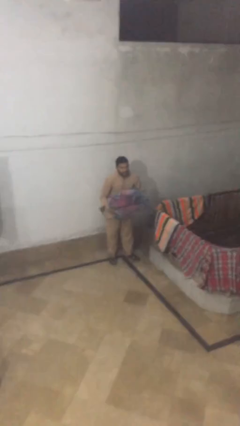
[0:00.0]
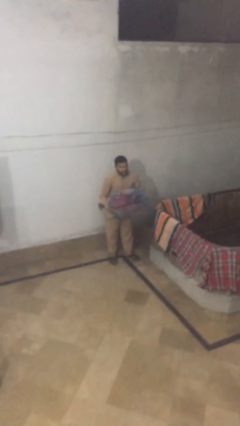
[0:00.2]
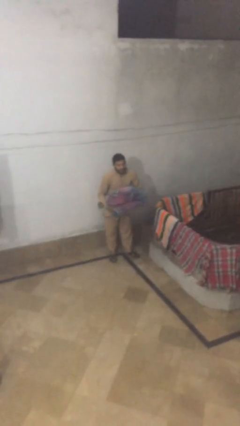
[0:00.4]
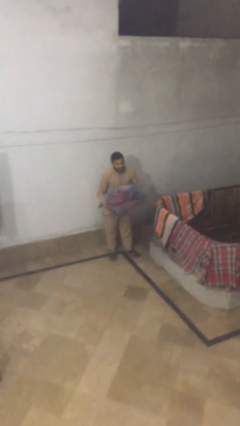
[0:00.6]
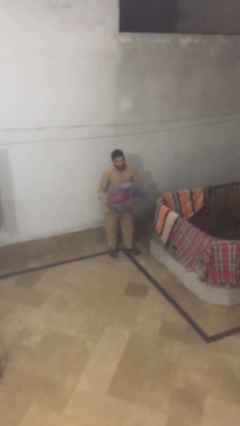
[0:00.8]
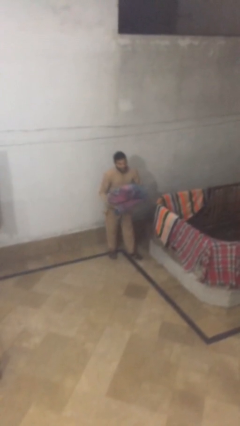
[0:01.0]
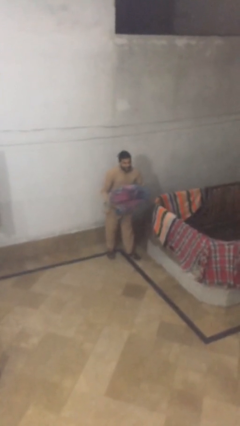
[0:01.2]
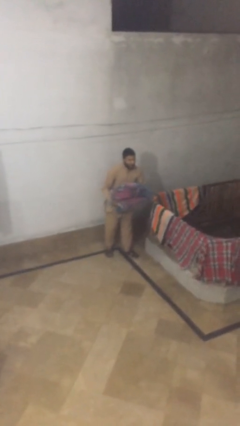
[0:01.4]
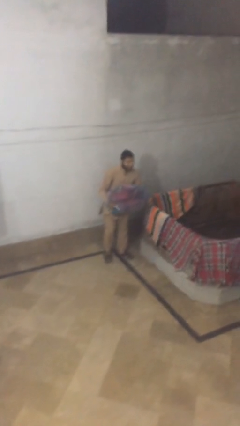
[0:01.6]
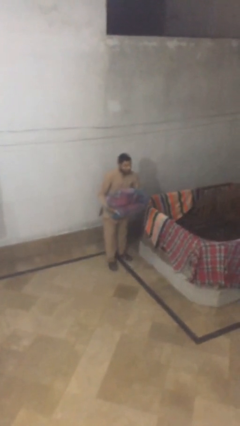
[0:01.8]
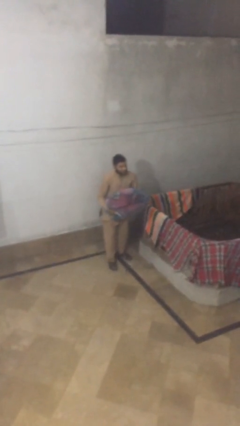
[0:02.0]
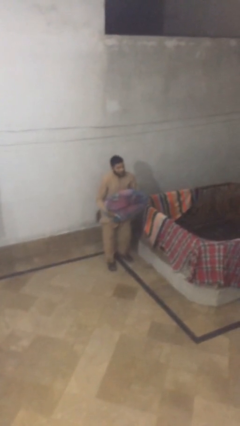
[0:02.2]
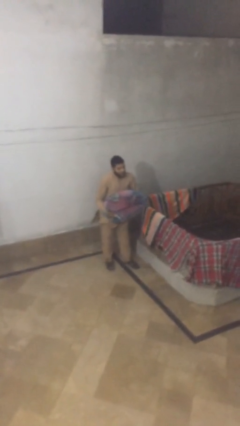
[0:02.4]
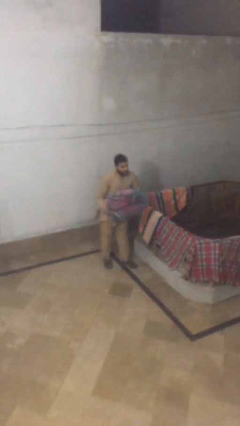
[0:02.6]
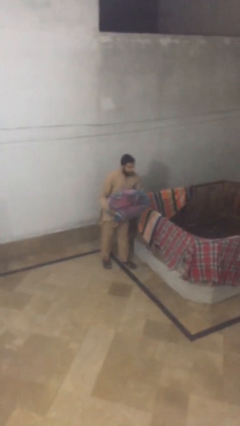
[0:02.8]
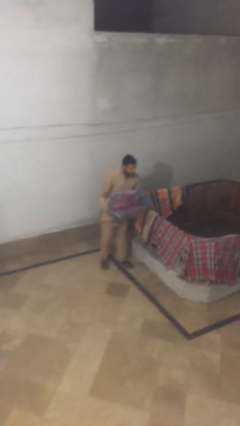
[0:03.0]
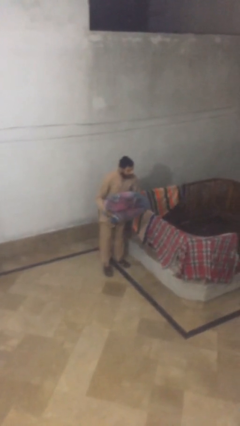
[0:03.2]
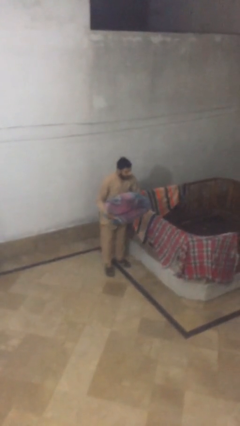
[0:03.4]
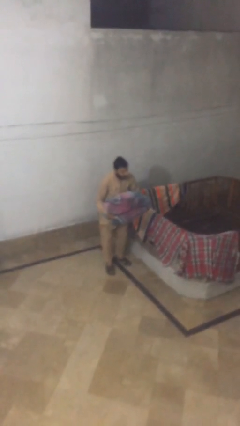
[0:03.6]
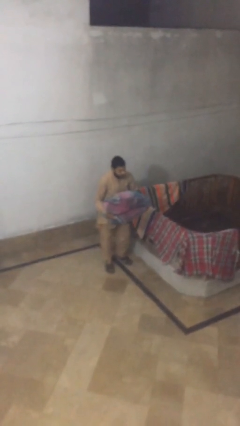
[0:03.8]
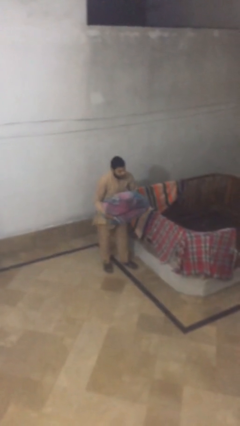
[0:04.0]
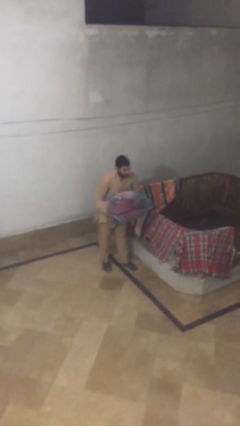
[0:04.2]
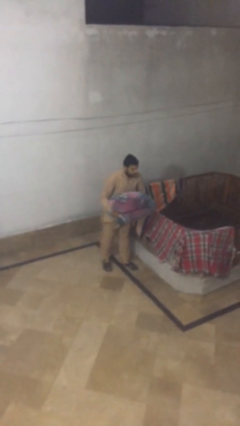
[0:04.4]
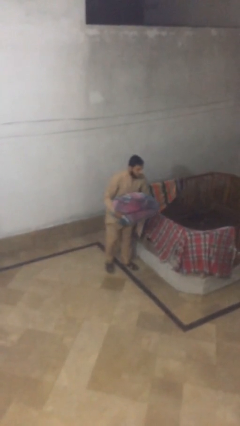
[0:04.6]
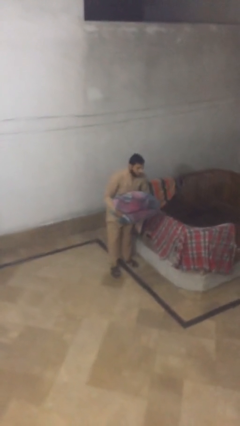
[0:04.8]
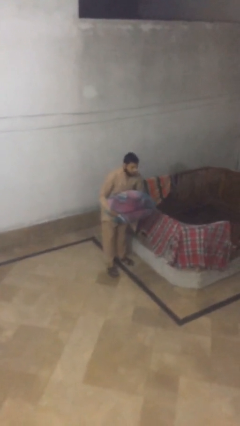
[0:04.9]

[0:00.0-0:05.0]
person carries heavy object

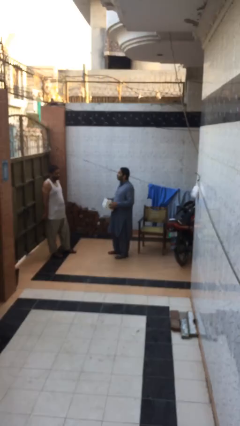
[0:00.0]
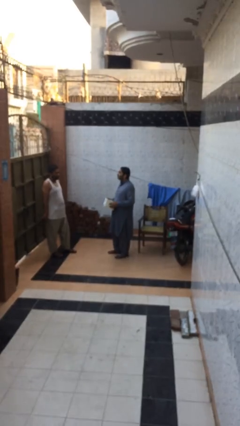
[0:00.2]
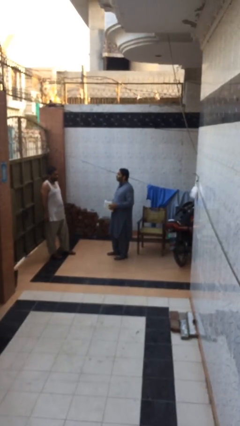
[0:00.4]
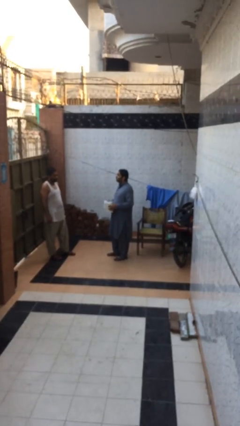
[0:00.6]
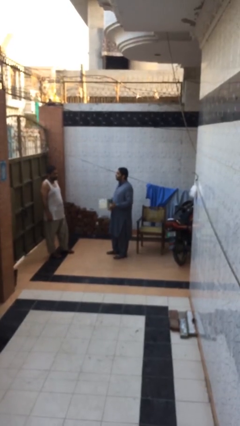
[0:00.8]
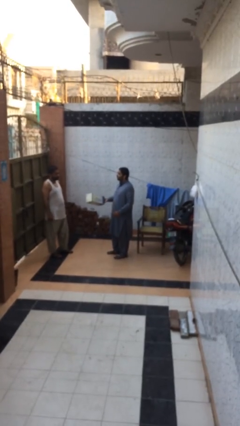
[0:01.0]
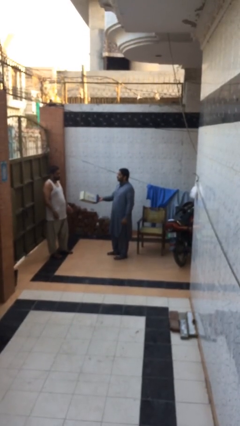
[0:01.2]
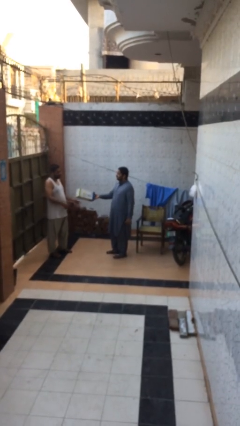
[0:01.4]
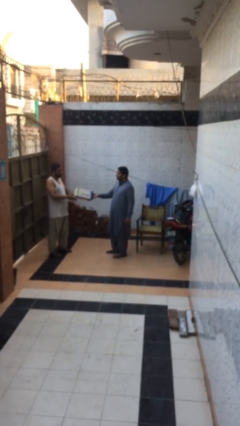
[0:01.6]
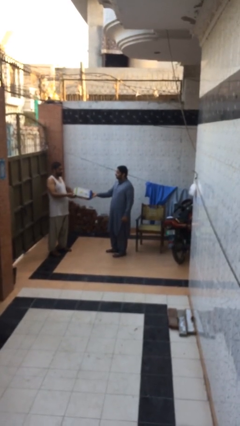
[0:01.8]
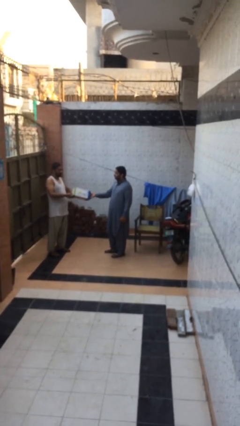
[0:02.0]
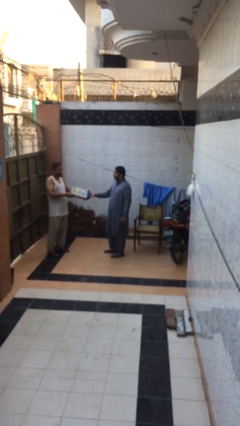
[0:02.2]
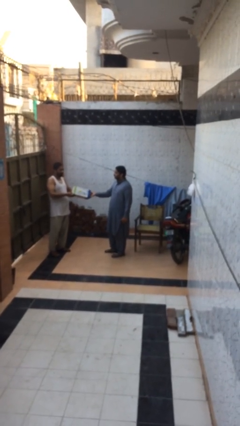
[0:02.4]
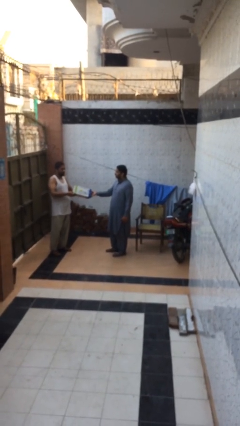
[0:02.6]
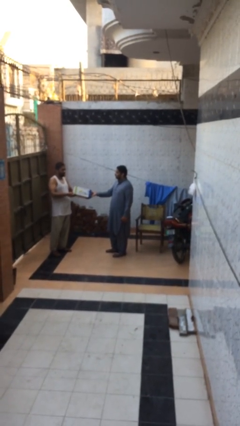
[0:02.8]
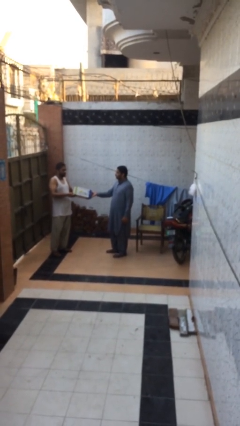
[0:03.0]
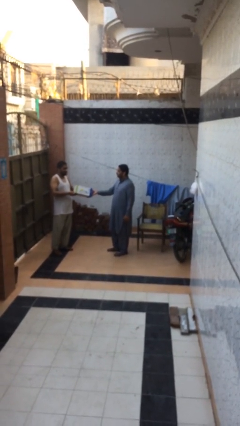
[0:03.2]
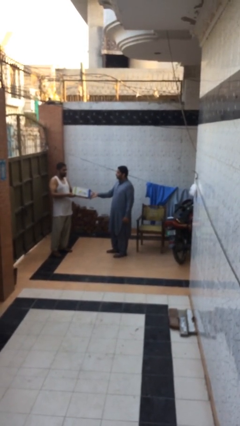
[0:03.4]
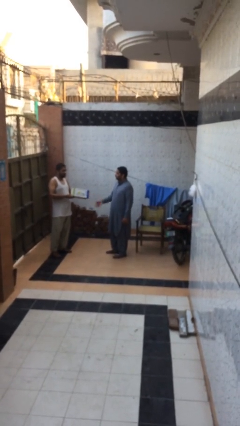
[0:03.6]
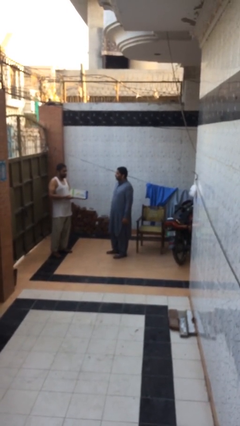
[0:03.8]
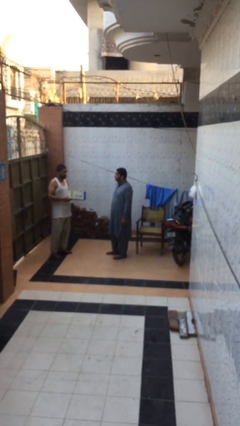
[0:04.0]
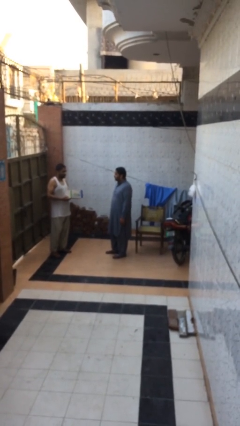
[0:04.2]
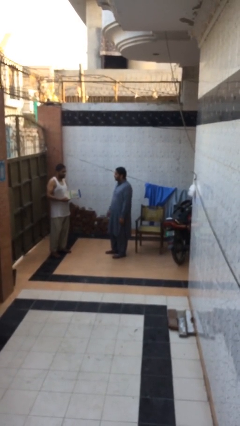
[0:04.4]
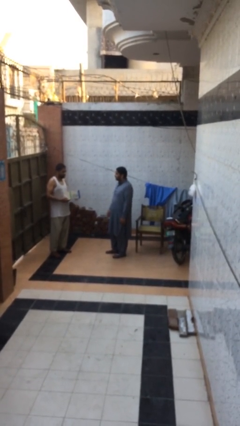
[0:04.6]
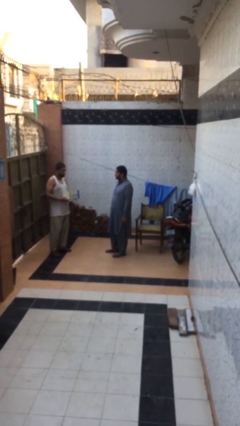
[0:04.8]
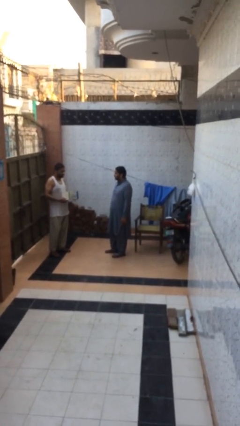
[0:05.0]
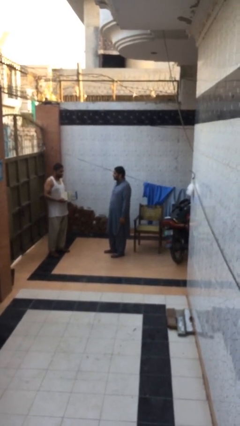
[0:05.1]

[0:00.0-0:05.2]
person transfers object to person

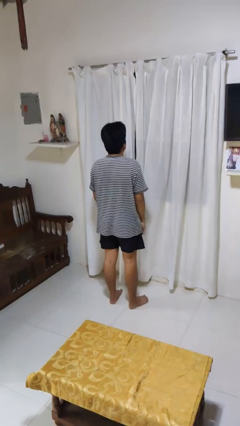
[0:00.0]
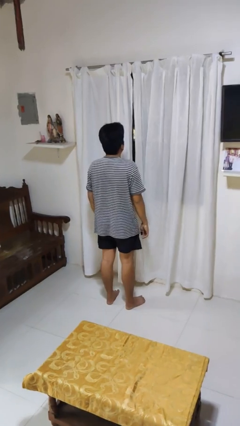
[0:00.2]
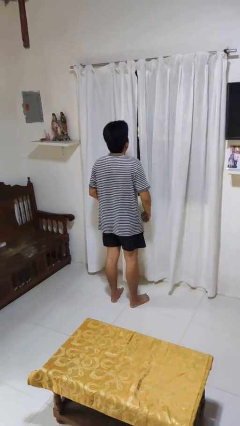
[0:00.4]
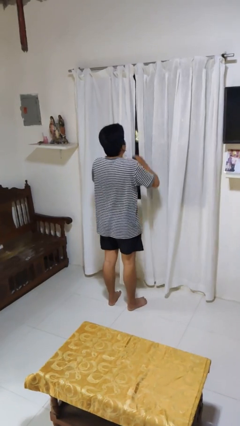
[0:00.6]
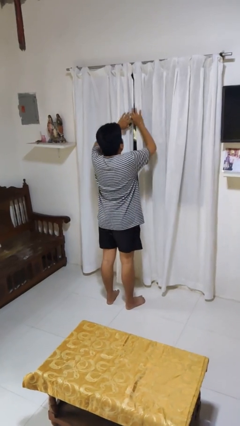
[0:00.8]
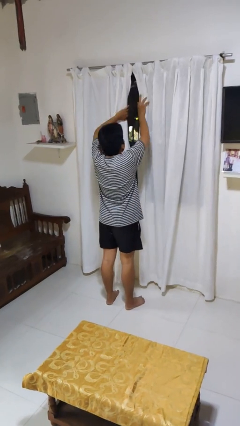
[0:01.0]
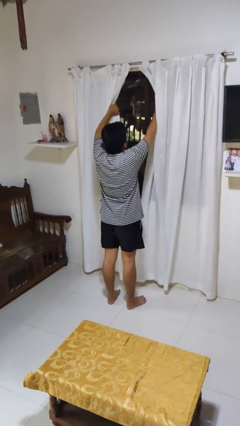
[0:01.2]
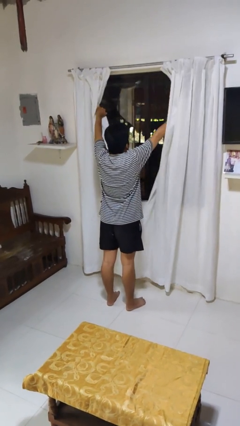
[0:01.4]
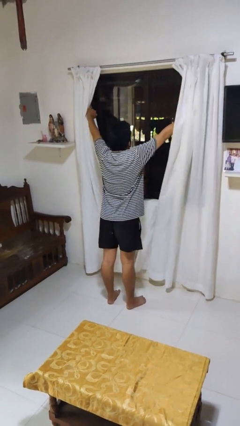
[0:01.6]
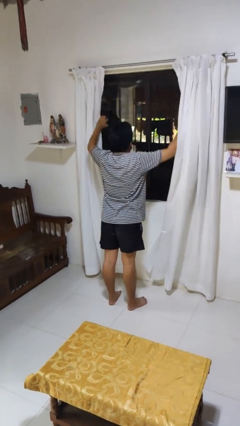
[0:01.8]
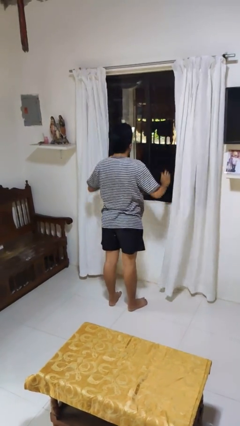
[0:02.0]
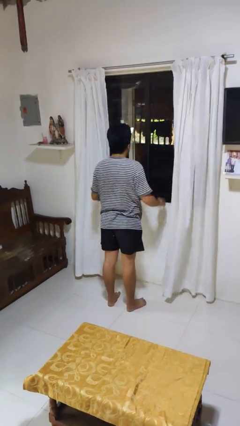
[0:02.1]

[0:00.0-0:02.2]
person opens curtains

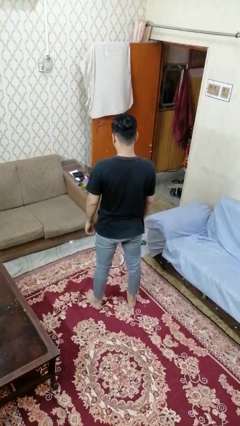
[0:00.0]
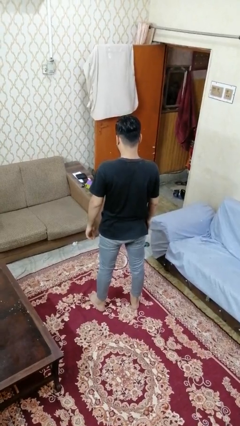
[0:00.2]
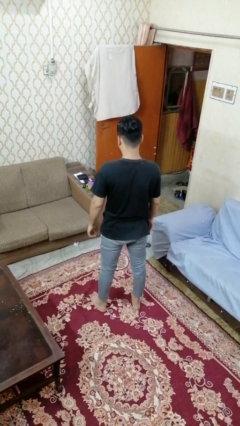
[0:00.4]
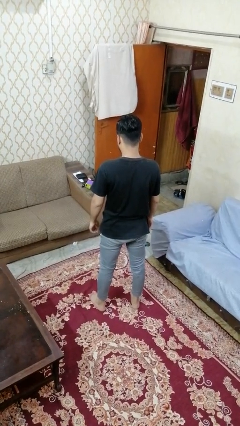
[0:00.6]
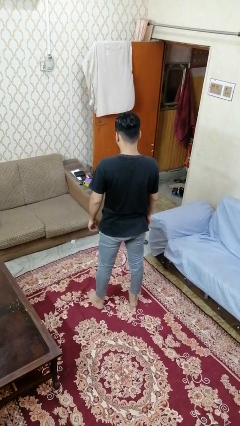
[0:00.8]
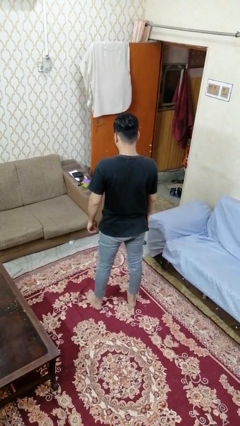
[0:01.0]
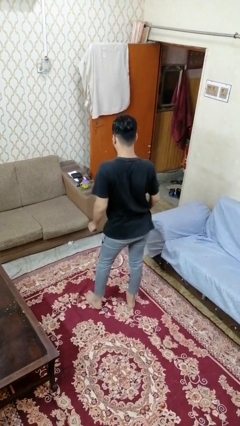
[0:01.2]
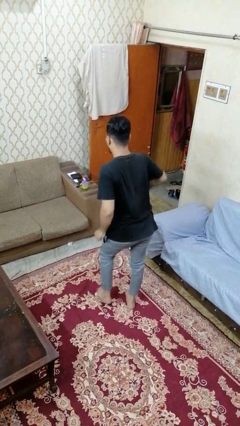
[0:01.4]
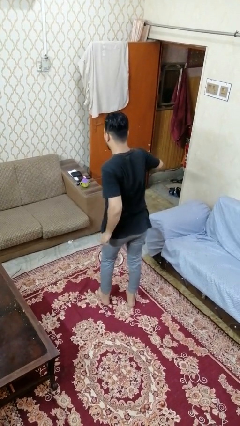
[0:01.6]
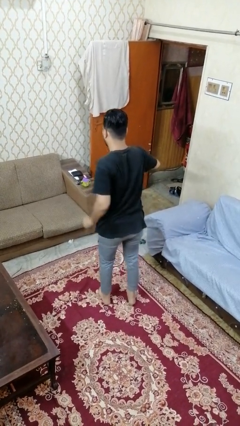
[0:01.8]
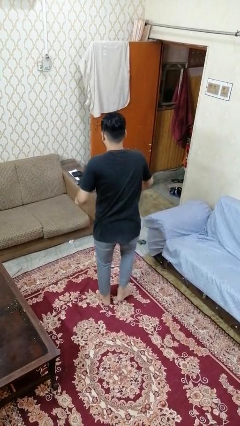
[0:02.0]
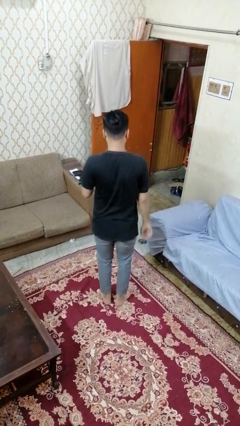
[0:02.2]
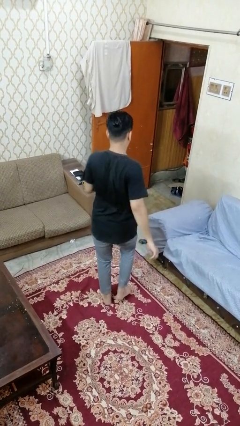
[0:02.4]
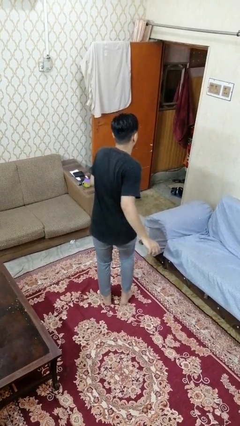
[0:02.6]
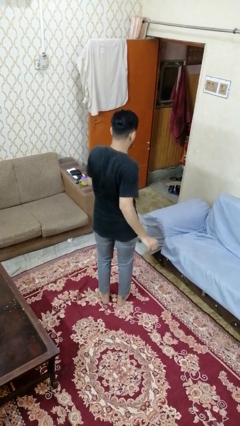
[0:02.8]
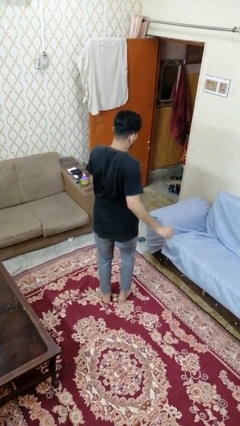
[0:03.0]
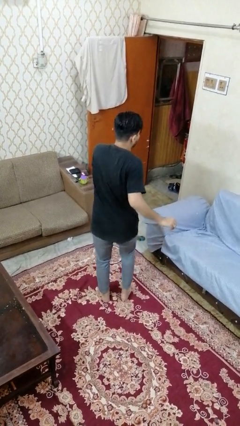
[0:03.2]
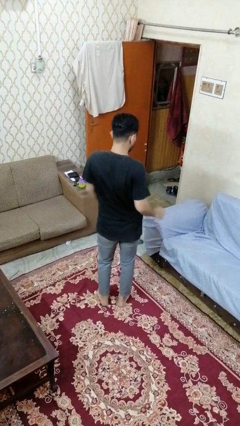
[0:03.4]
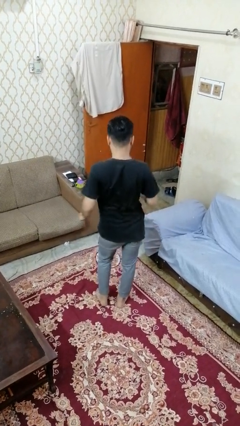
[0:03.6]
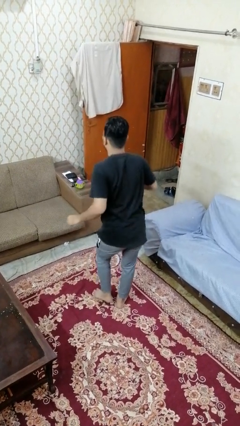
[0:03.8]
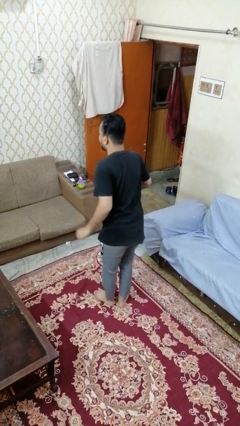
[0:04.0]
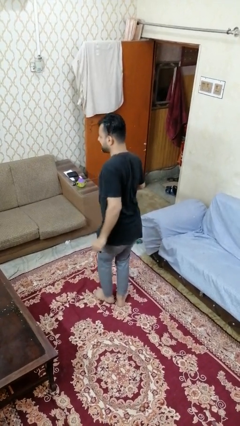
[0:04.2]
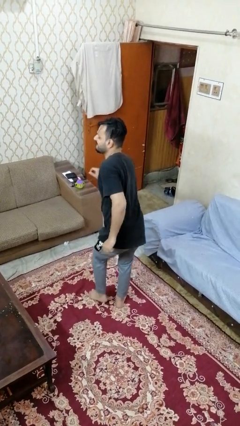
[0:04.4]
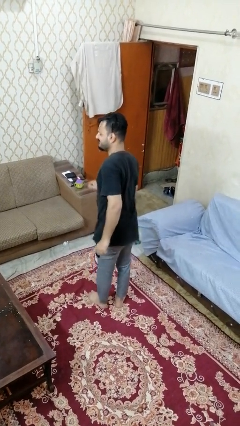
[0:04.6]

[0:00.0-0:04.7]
person dances in place

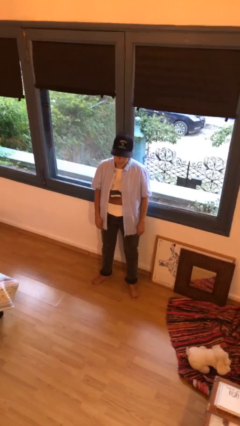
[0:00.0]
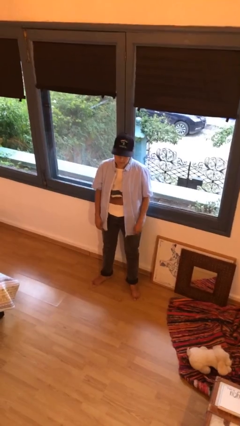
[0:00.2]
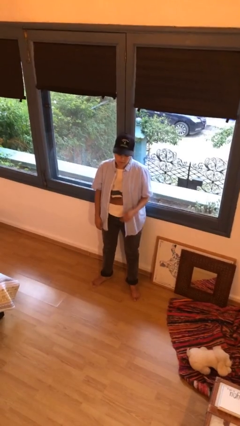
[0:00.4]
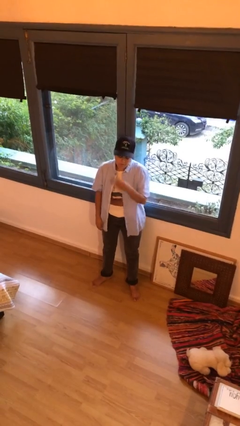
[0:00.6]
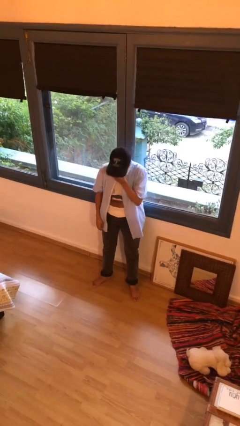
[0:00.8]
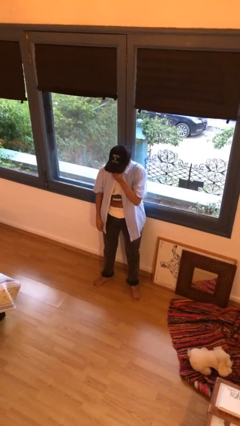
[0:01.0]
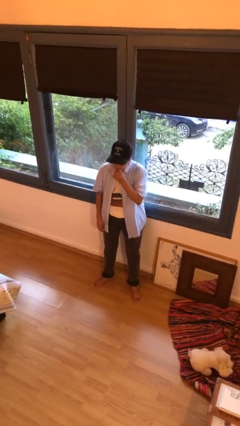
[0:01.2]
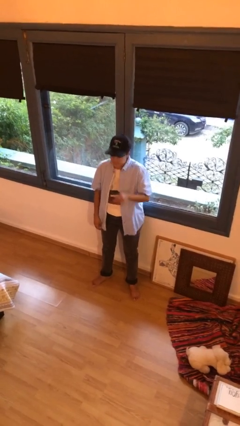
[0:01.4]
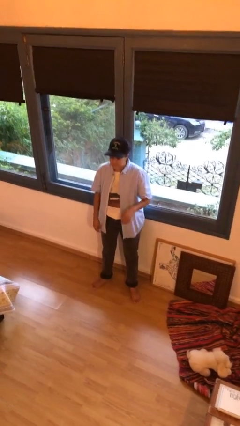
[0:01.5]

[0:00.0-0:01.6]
person sneezes into hand
